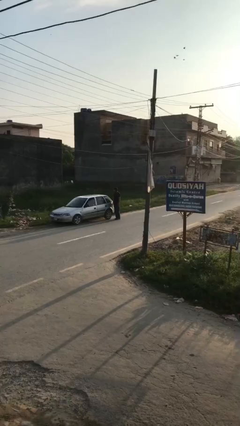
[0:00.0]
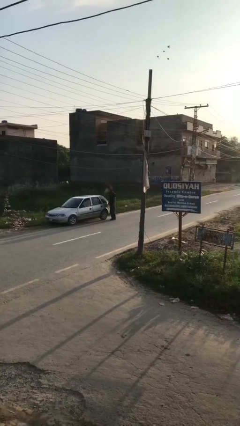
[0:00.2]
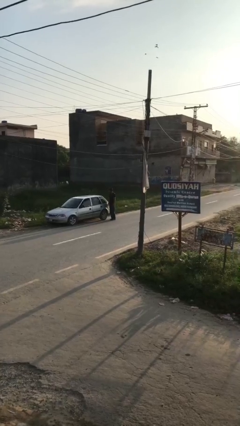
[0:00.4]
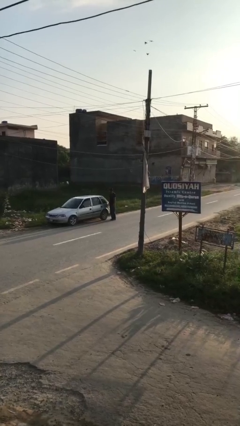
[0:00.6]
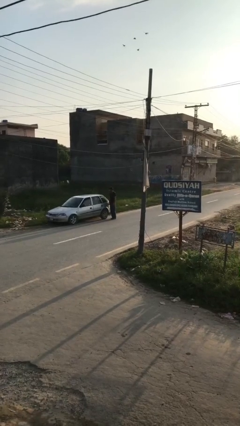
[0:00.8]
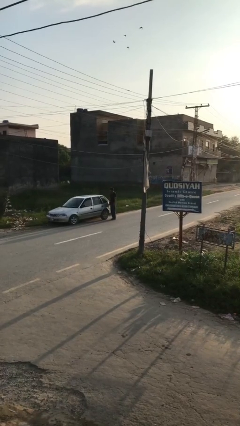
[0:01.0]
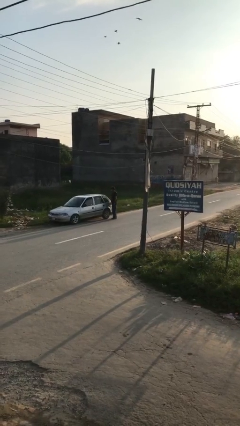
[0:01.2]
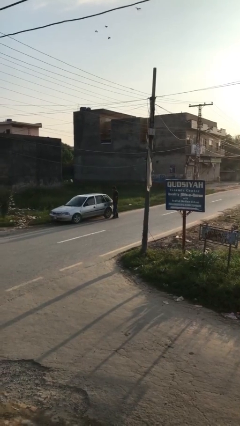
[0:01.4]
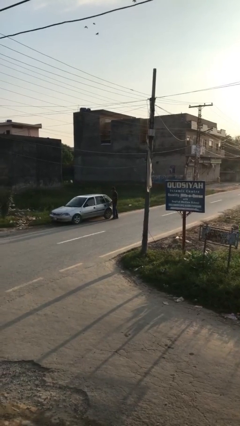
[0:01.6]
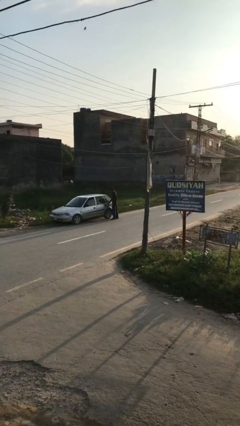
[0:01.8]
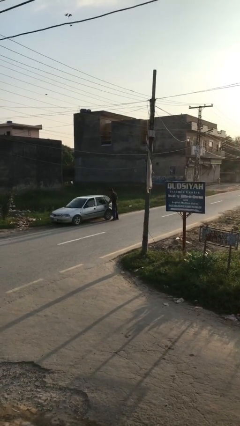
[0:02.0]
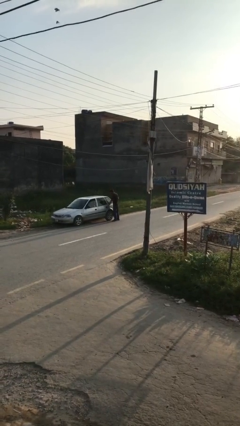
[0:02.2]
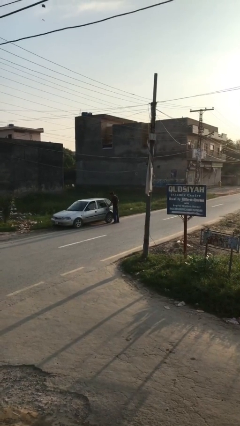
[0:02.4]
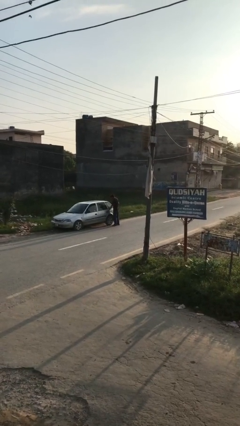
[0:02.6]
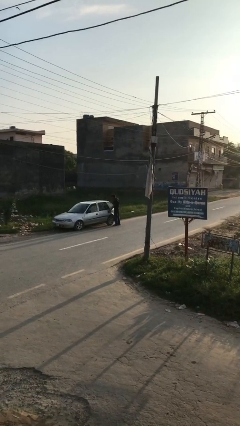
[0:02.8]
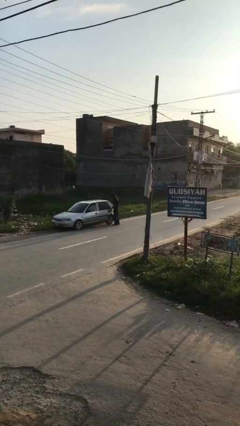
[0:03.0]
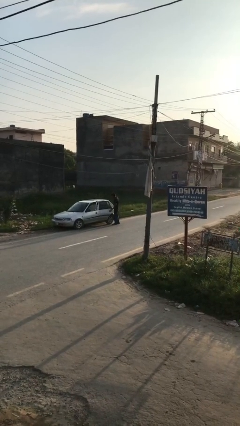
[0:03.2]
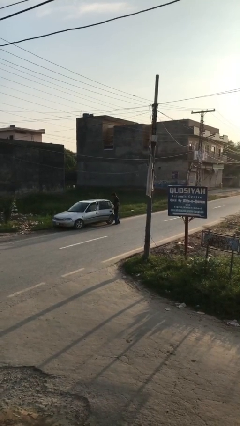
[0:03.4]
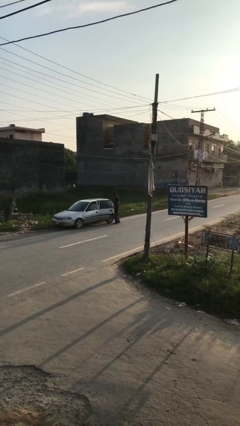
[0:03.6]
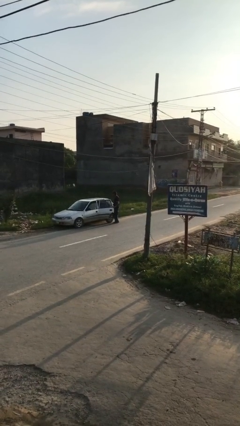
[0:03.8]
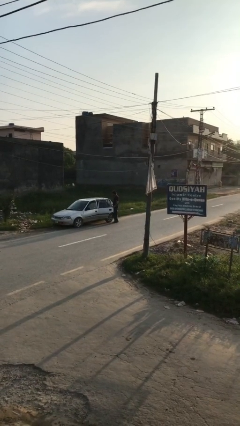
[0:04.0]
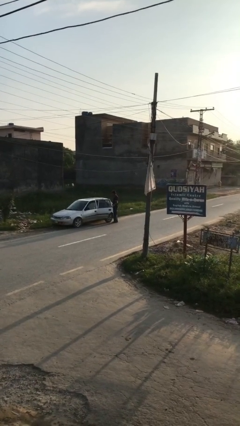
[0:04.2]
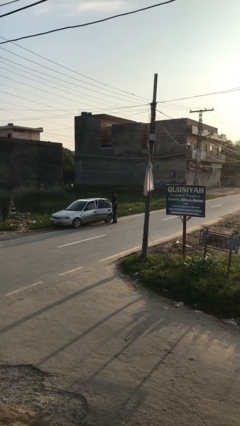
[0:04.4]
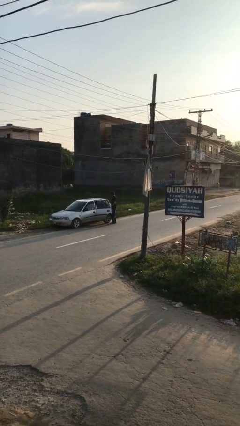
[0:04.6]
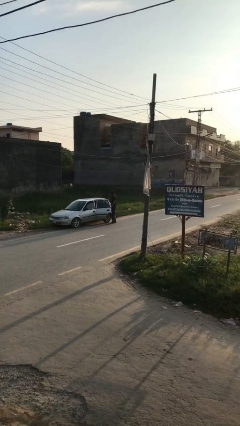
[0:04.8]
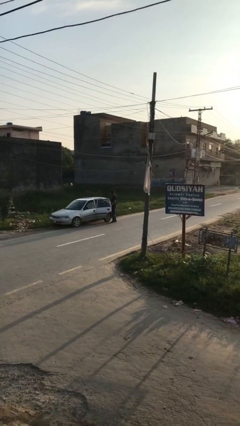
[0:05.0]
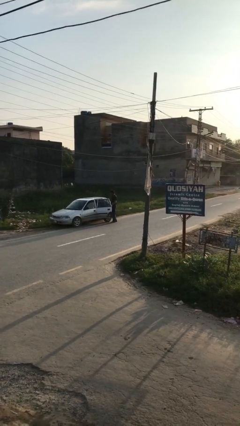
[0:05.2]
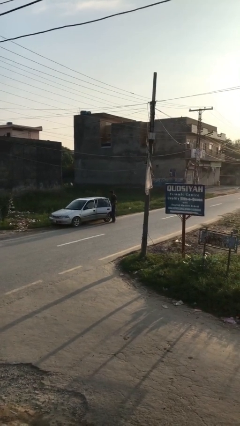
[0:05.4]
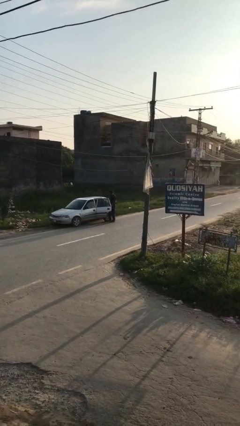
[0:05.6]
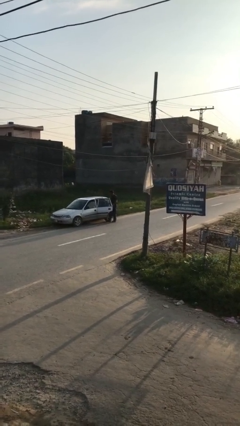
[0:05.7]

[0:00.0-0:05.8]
person opens car door

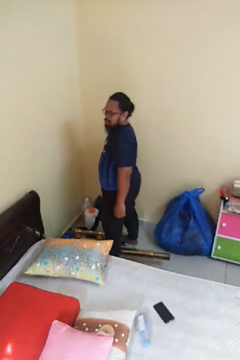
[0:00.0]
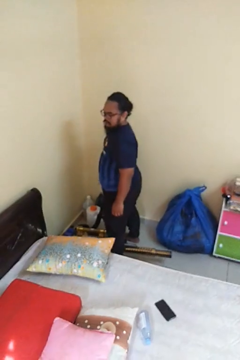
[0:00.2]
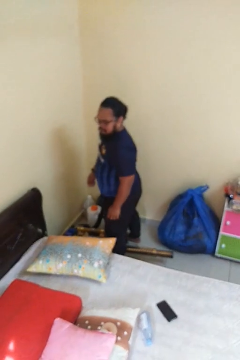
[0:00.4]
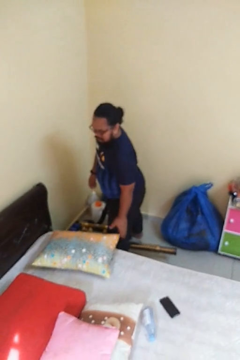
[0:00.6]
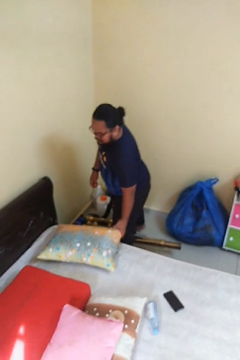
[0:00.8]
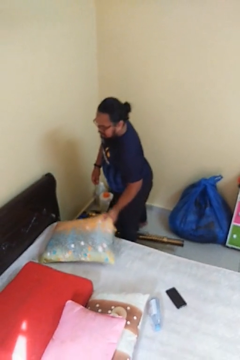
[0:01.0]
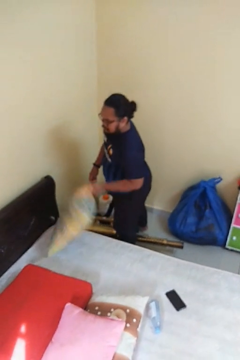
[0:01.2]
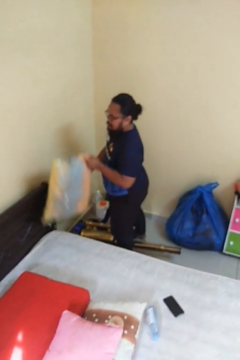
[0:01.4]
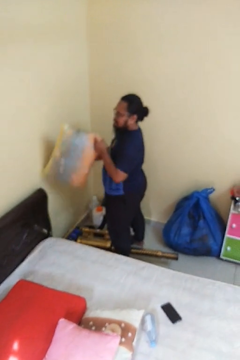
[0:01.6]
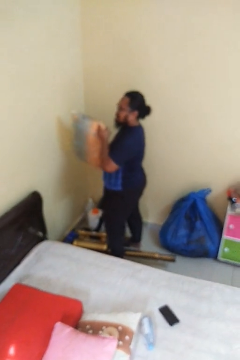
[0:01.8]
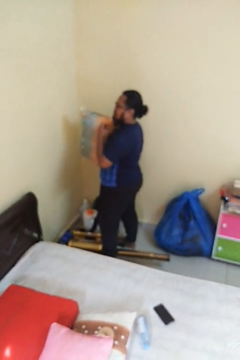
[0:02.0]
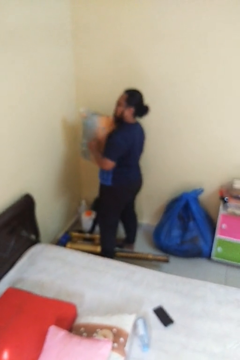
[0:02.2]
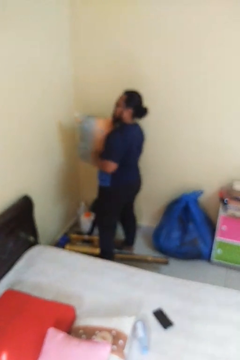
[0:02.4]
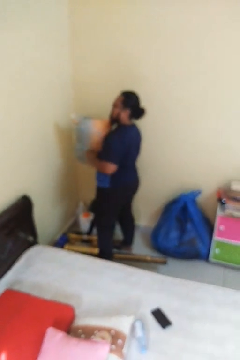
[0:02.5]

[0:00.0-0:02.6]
person picks up object from bed

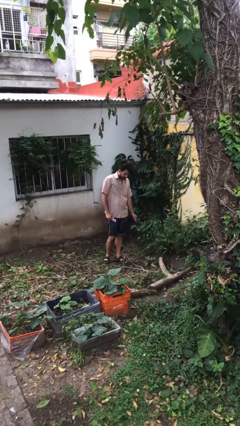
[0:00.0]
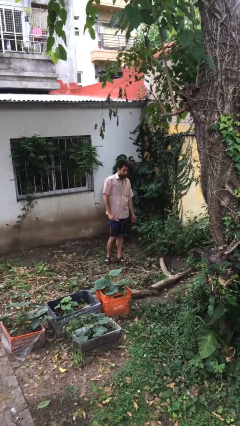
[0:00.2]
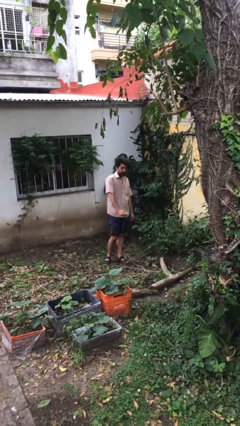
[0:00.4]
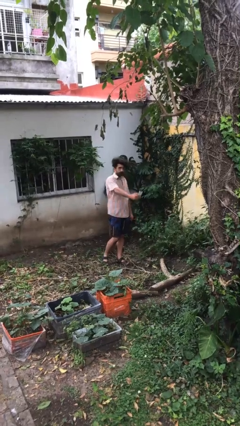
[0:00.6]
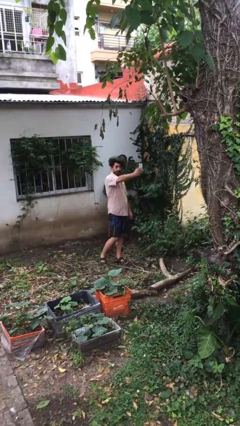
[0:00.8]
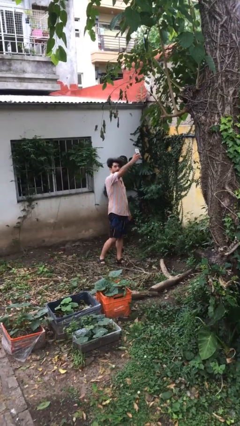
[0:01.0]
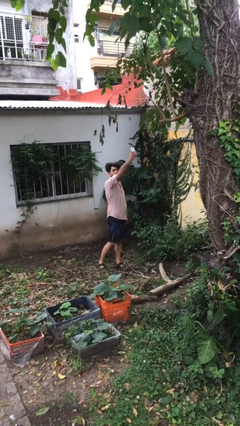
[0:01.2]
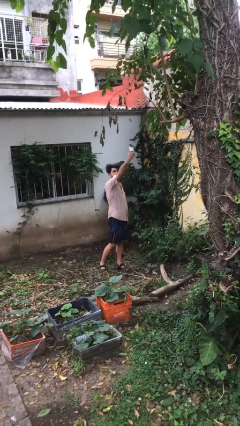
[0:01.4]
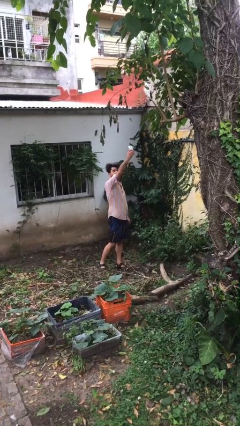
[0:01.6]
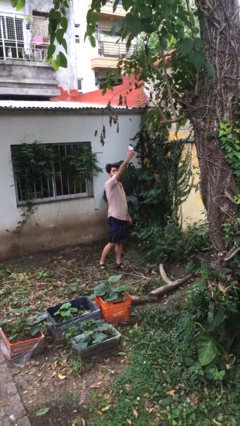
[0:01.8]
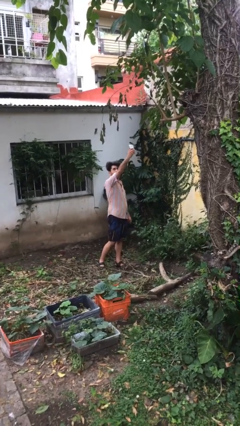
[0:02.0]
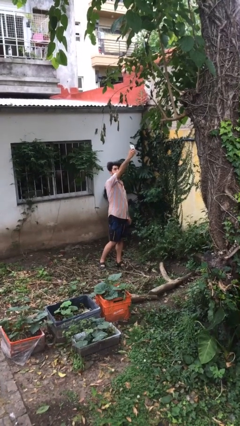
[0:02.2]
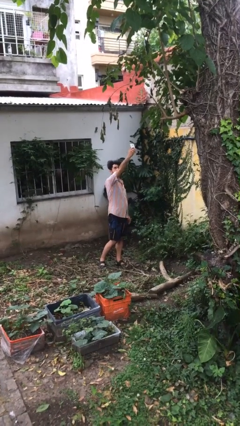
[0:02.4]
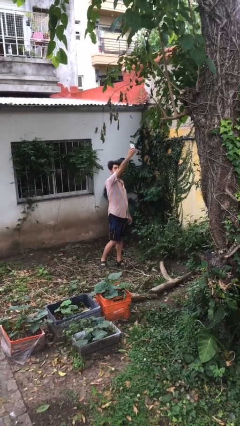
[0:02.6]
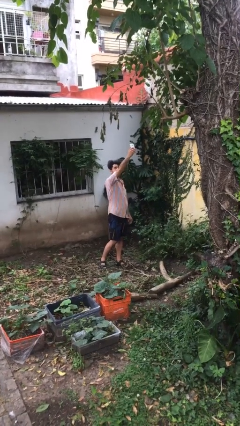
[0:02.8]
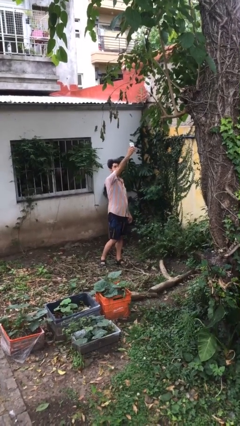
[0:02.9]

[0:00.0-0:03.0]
person takes selfie

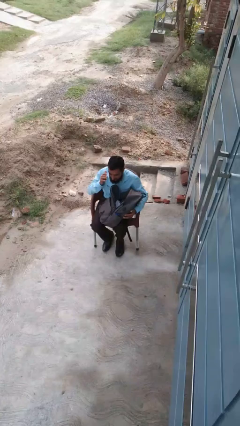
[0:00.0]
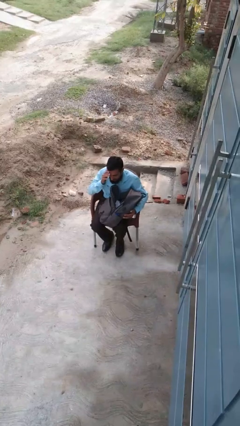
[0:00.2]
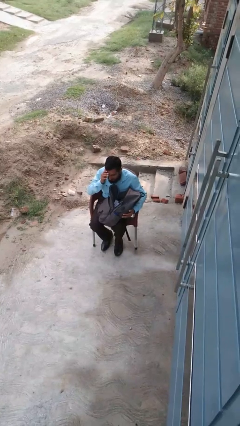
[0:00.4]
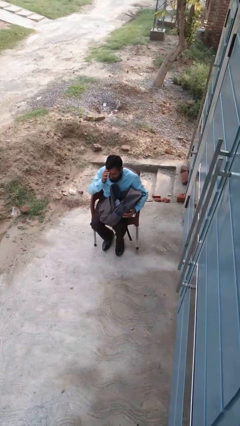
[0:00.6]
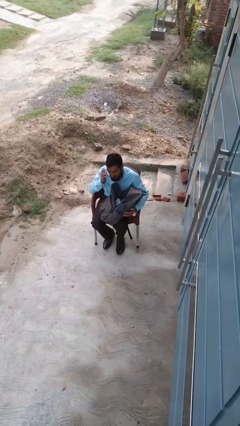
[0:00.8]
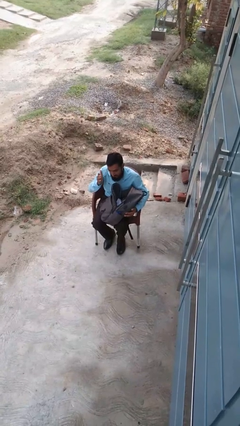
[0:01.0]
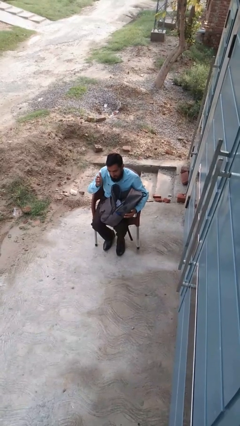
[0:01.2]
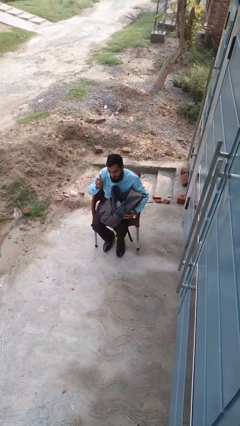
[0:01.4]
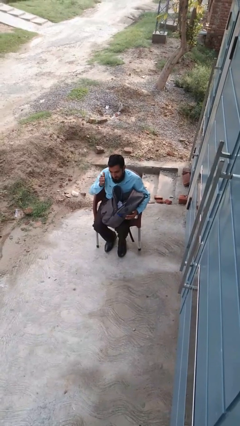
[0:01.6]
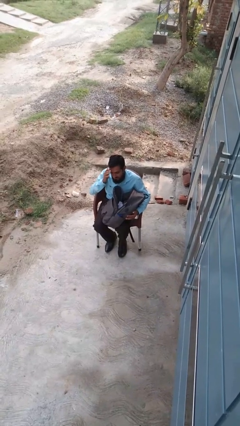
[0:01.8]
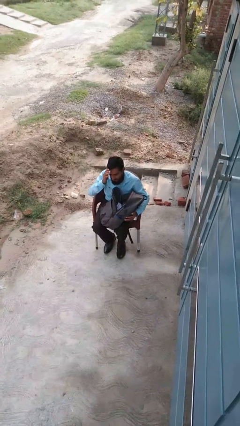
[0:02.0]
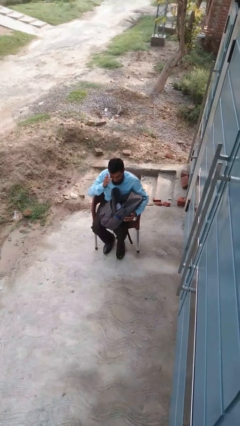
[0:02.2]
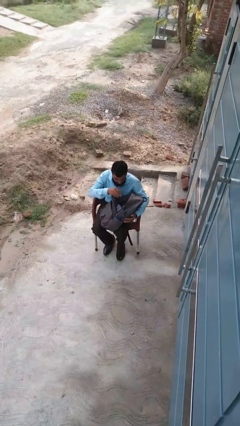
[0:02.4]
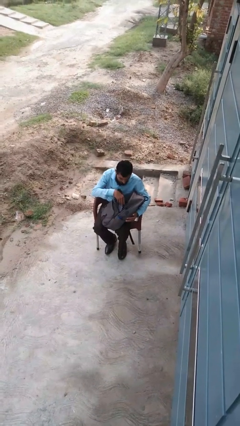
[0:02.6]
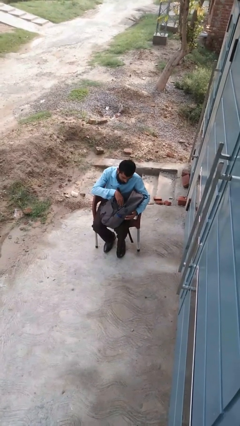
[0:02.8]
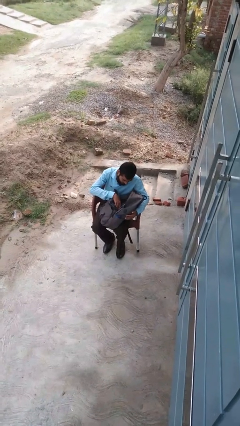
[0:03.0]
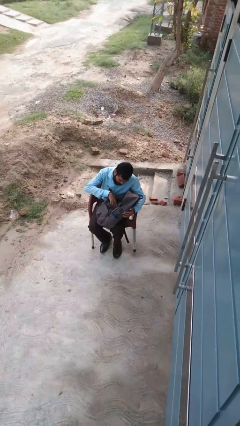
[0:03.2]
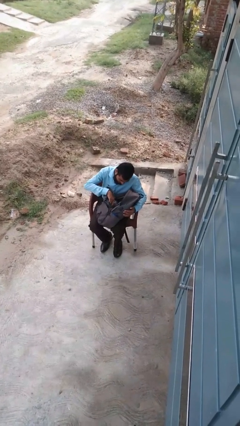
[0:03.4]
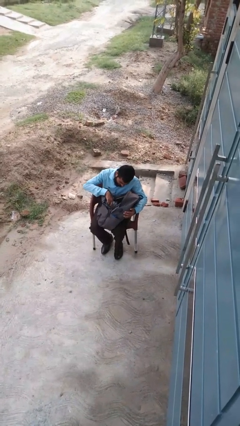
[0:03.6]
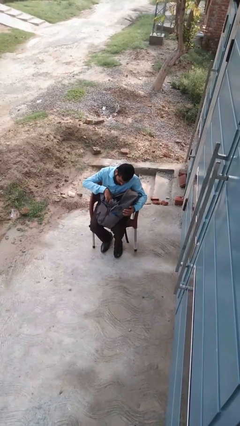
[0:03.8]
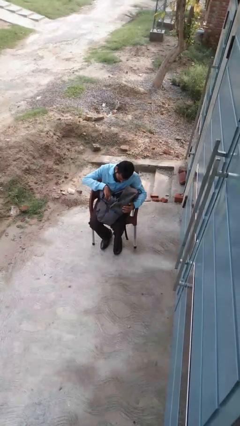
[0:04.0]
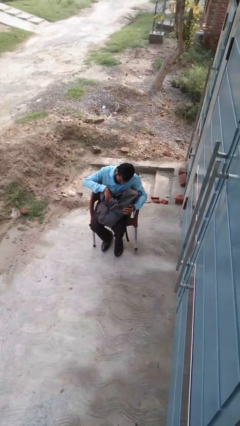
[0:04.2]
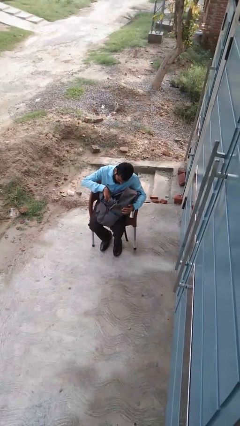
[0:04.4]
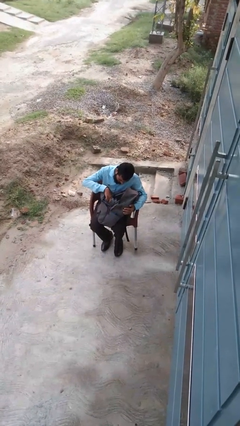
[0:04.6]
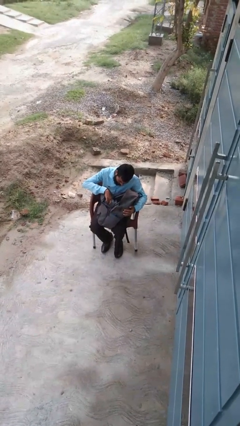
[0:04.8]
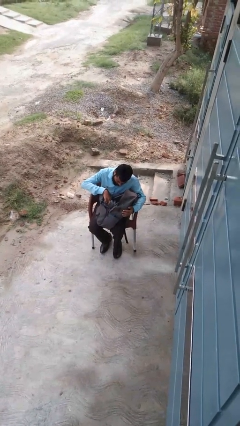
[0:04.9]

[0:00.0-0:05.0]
person searches in backpack

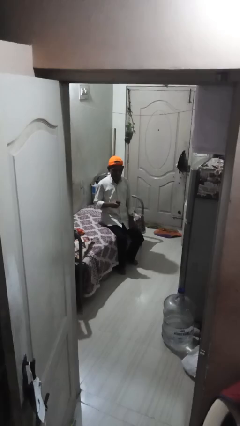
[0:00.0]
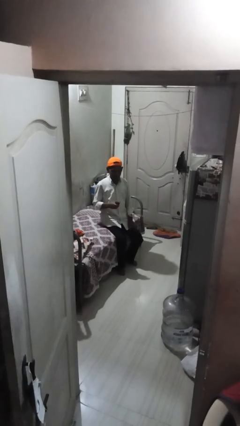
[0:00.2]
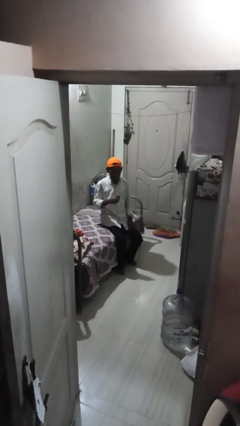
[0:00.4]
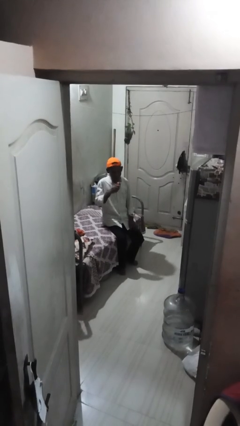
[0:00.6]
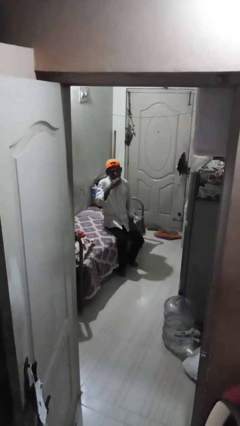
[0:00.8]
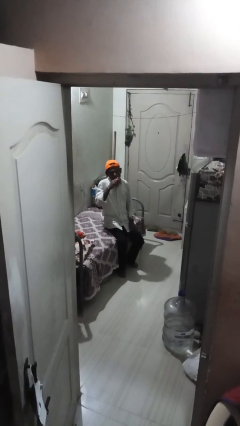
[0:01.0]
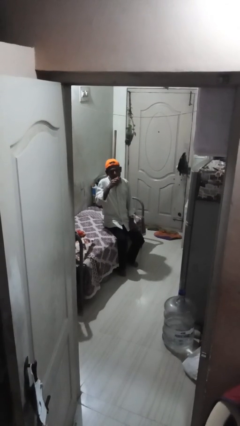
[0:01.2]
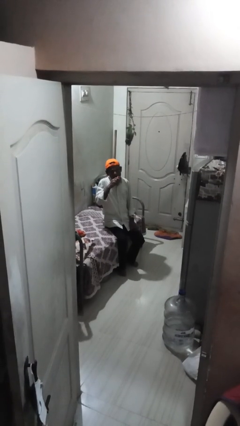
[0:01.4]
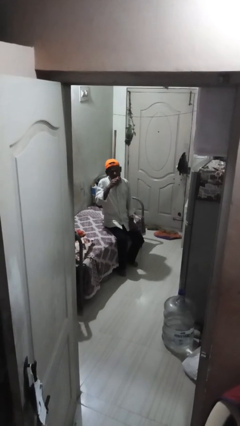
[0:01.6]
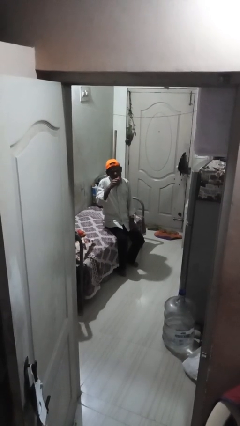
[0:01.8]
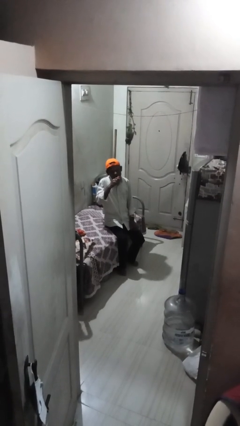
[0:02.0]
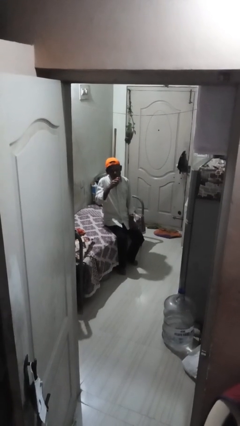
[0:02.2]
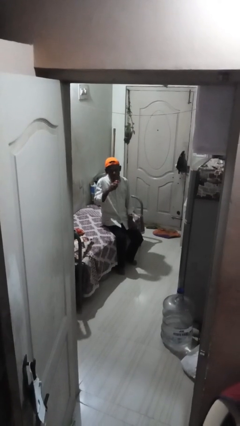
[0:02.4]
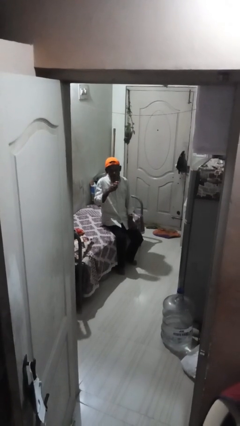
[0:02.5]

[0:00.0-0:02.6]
person eats apple
